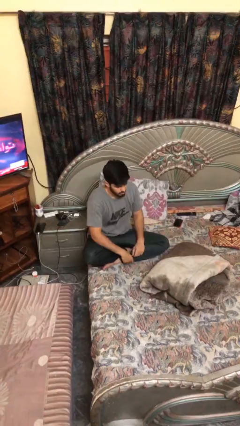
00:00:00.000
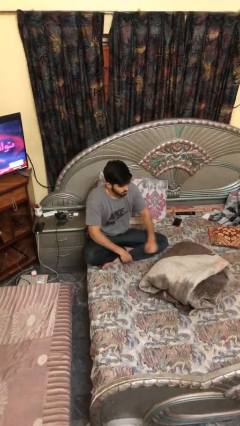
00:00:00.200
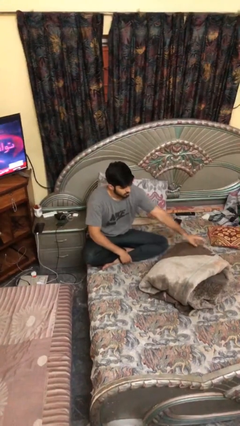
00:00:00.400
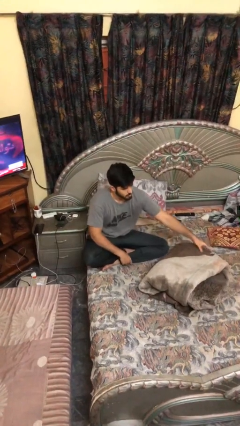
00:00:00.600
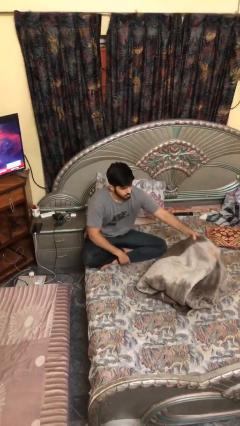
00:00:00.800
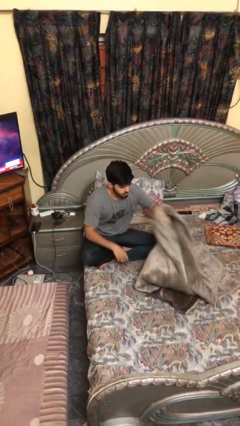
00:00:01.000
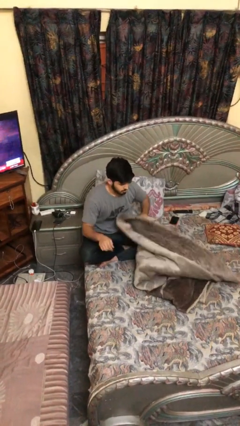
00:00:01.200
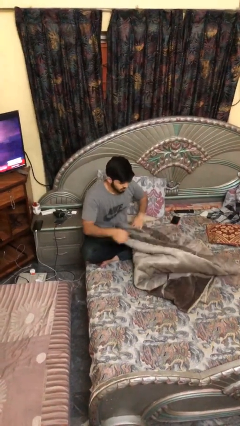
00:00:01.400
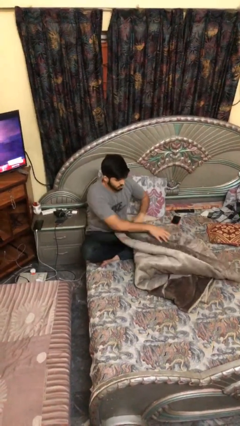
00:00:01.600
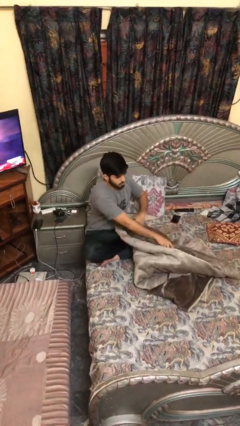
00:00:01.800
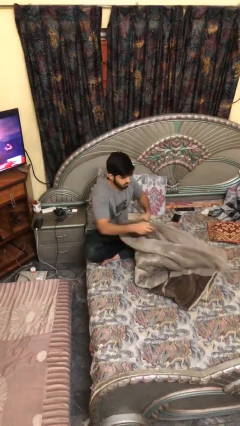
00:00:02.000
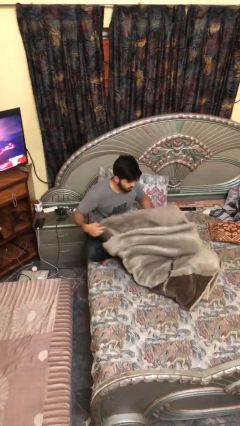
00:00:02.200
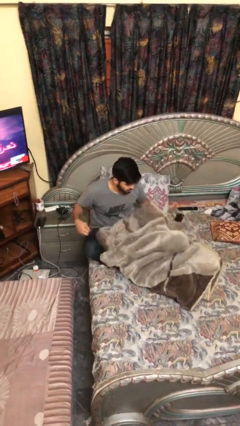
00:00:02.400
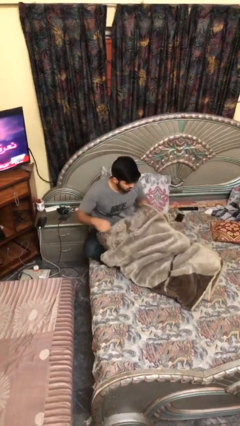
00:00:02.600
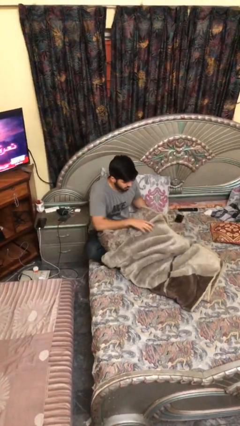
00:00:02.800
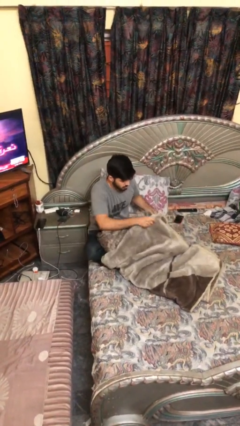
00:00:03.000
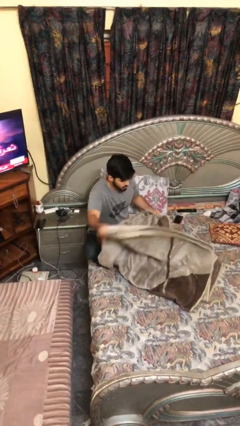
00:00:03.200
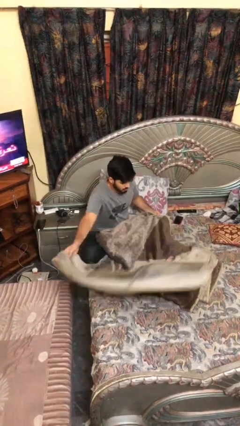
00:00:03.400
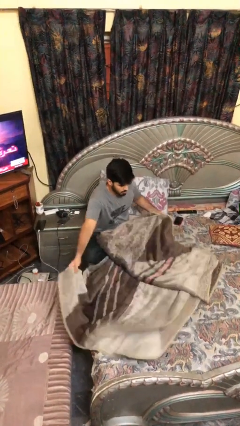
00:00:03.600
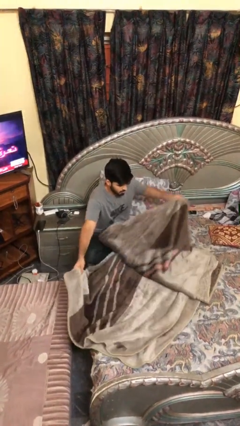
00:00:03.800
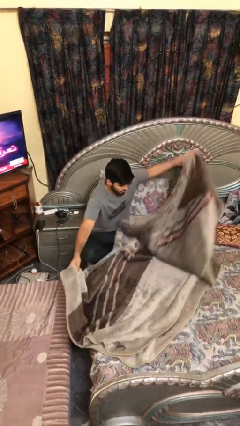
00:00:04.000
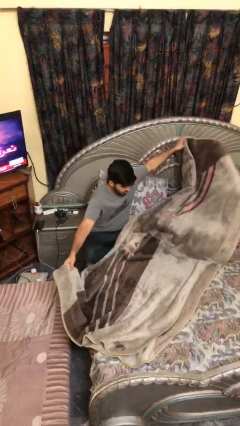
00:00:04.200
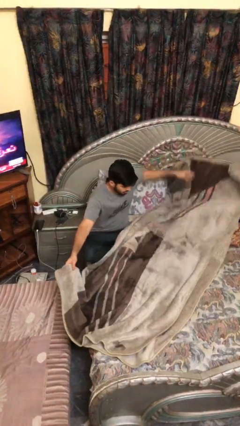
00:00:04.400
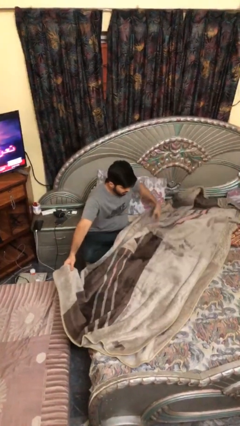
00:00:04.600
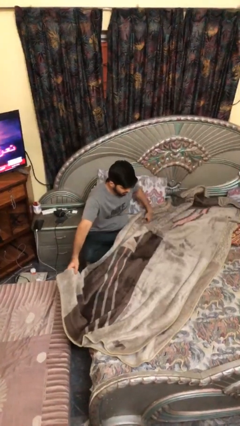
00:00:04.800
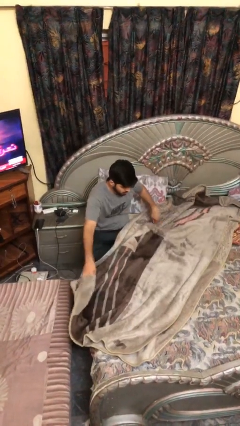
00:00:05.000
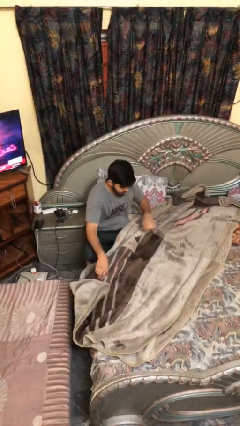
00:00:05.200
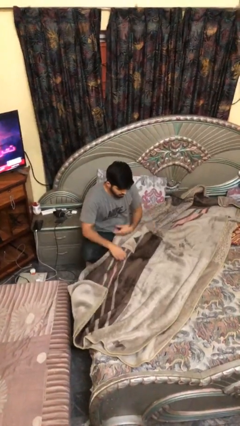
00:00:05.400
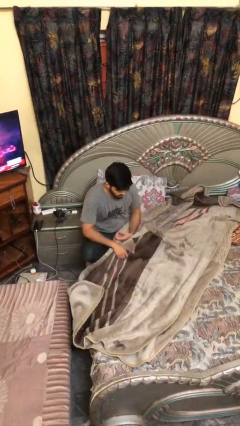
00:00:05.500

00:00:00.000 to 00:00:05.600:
person unfolds blanket

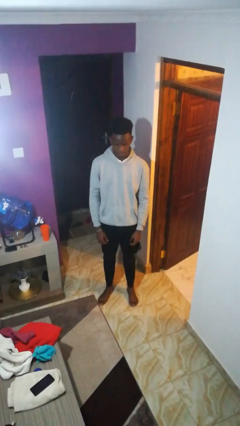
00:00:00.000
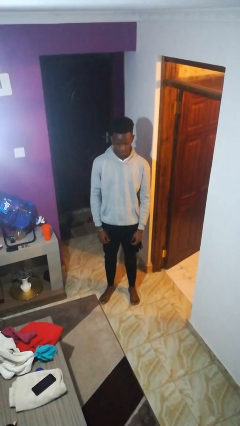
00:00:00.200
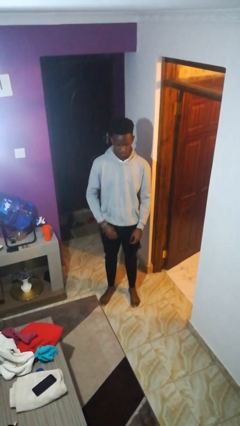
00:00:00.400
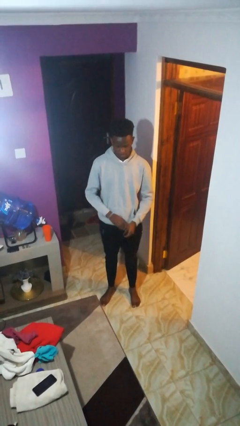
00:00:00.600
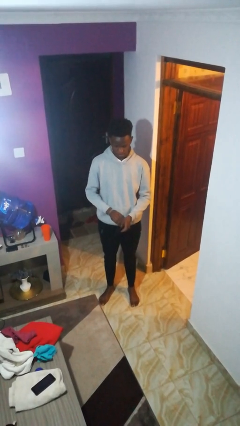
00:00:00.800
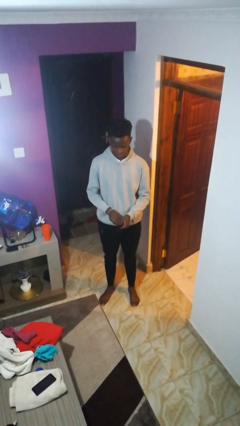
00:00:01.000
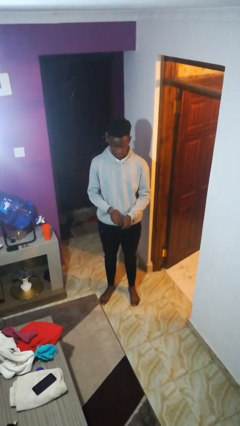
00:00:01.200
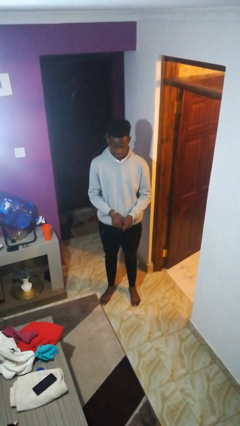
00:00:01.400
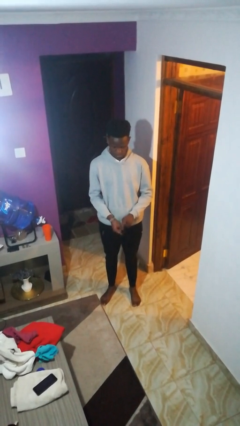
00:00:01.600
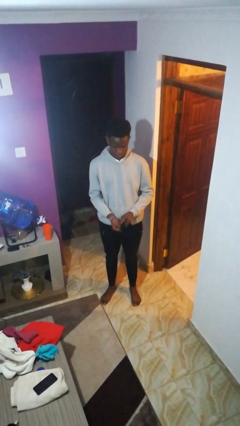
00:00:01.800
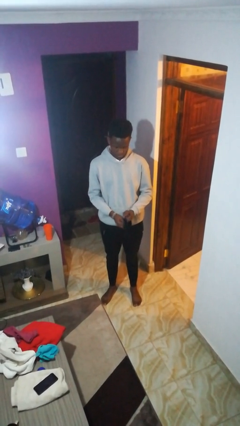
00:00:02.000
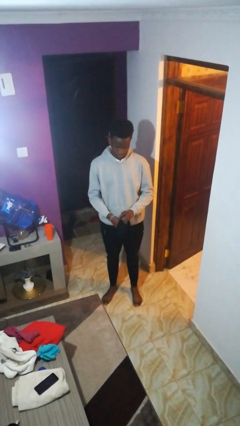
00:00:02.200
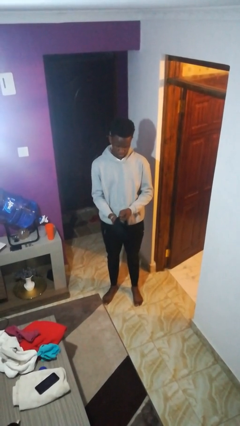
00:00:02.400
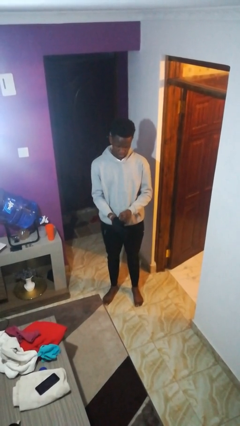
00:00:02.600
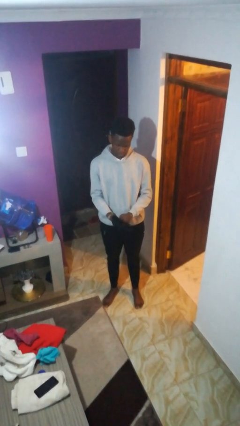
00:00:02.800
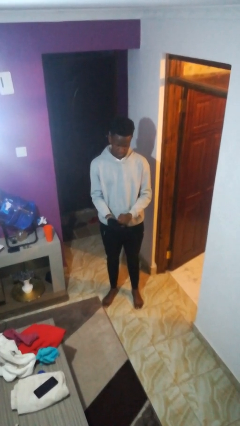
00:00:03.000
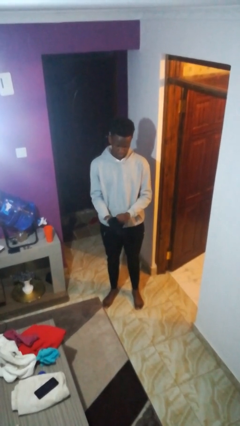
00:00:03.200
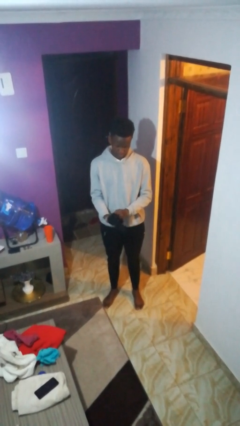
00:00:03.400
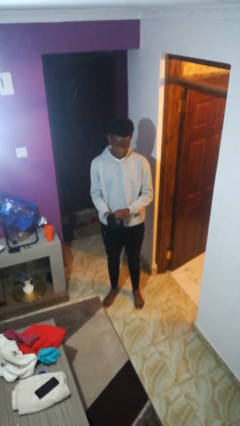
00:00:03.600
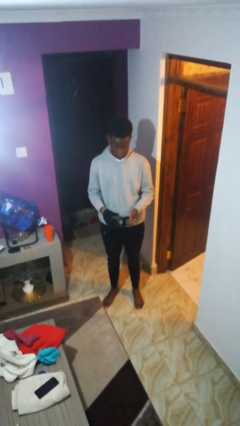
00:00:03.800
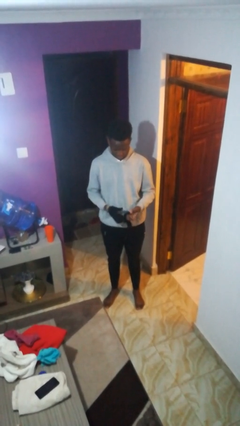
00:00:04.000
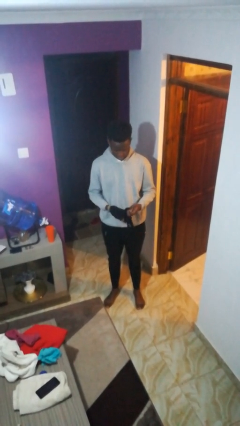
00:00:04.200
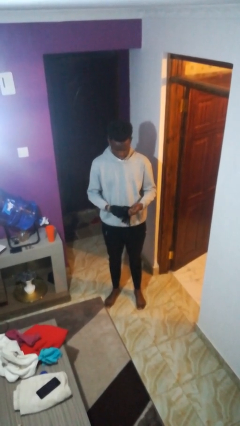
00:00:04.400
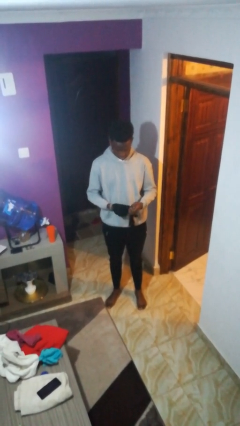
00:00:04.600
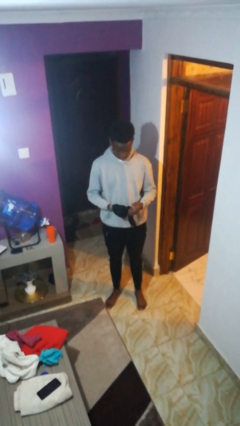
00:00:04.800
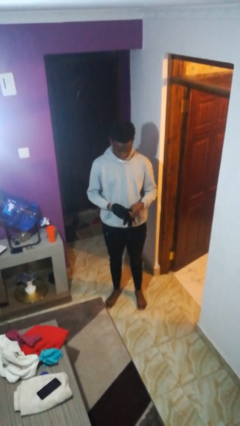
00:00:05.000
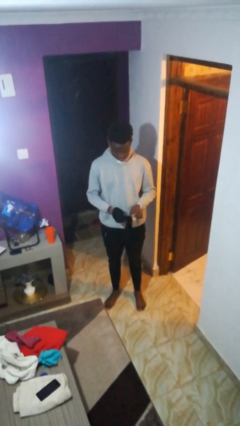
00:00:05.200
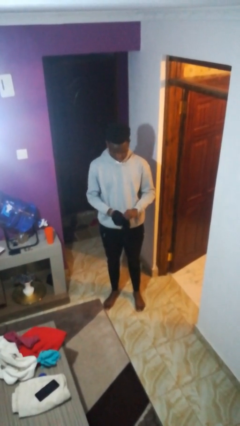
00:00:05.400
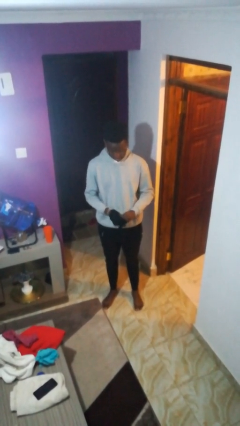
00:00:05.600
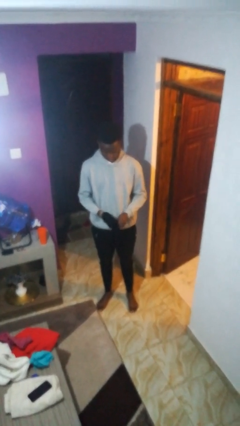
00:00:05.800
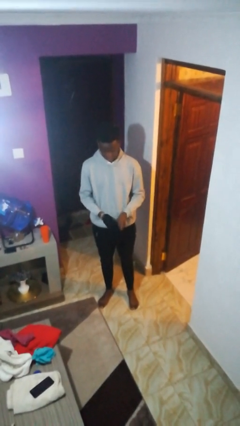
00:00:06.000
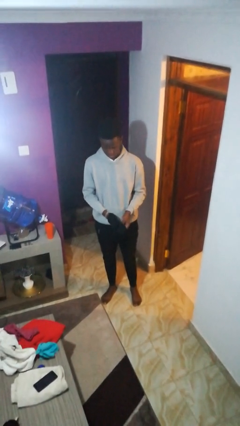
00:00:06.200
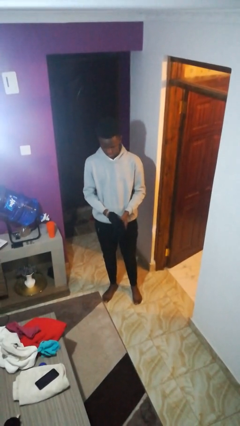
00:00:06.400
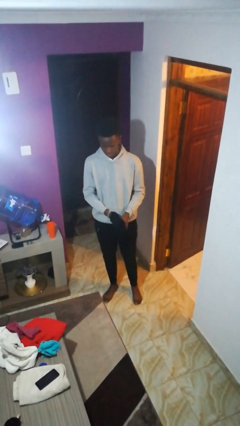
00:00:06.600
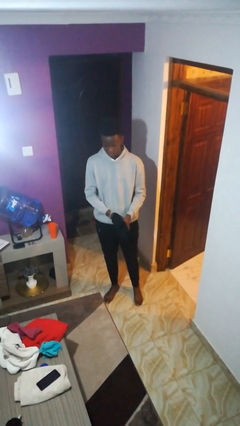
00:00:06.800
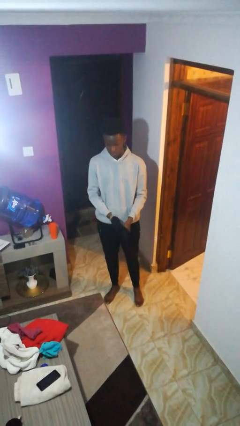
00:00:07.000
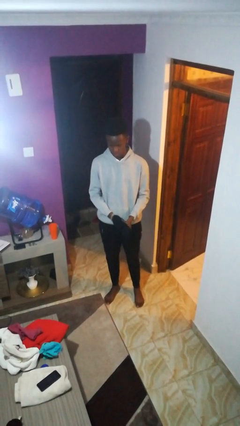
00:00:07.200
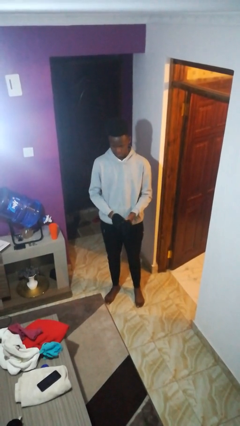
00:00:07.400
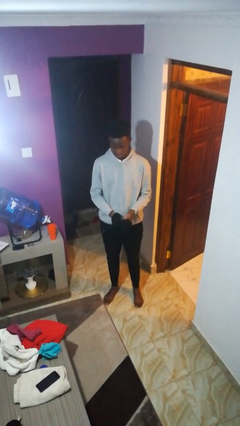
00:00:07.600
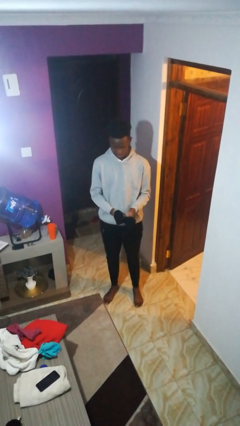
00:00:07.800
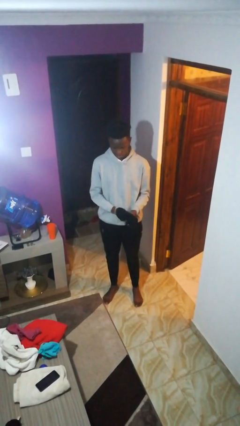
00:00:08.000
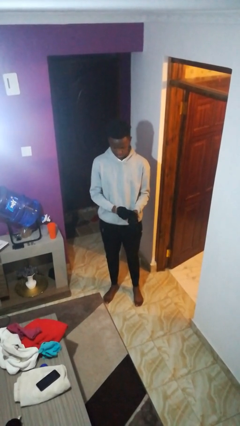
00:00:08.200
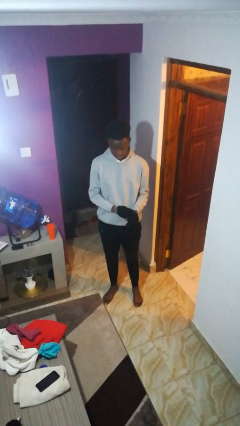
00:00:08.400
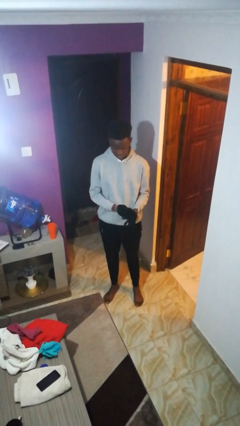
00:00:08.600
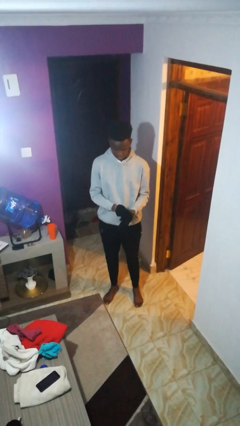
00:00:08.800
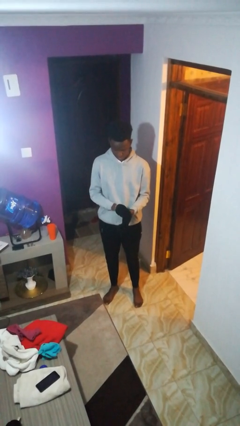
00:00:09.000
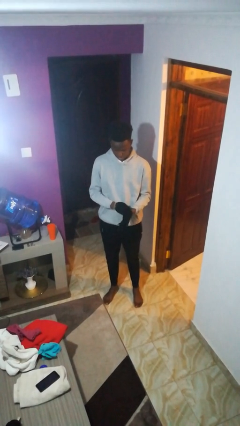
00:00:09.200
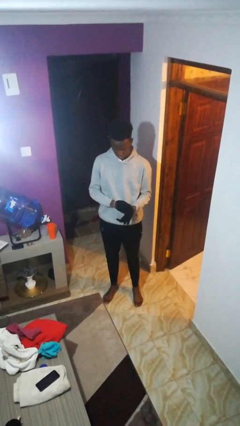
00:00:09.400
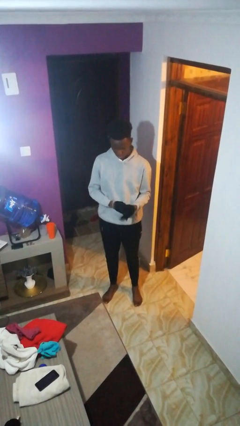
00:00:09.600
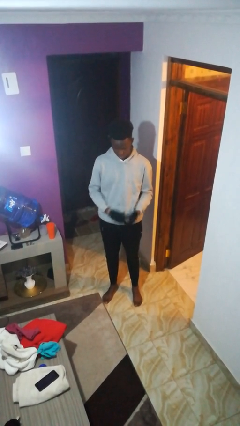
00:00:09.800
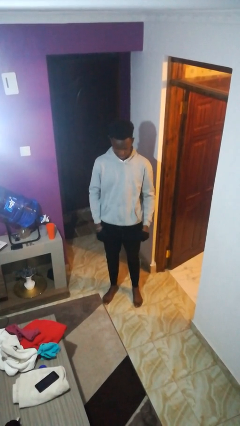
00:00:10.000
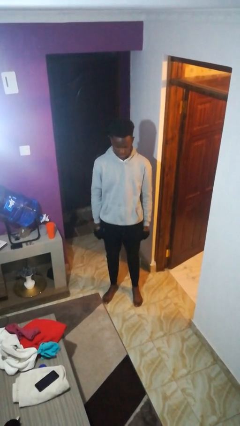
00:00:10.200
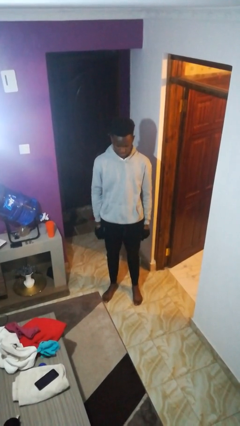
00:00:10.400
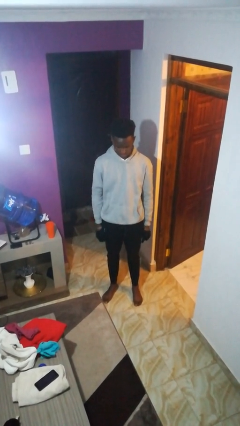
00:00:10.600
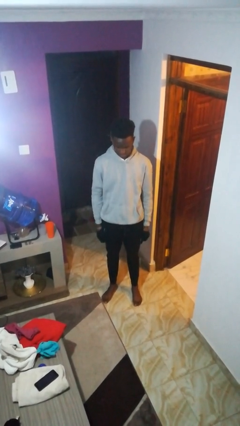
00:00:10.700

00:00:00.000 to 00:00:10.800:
person puts on gloves

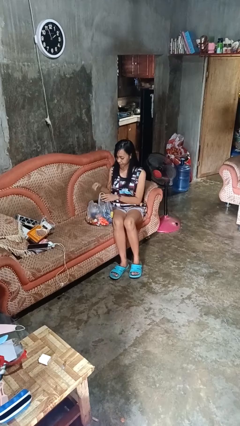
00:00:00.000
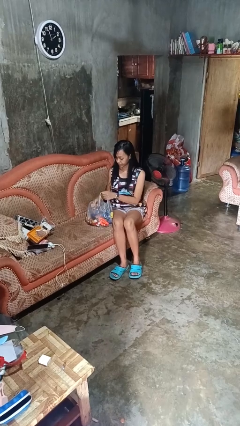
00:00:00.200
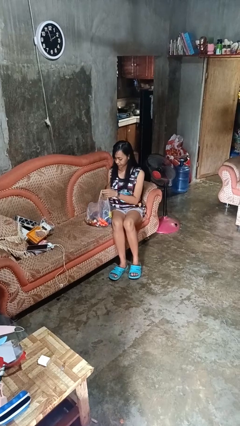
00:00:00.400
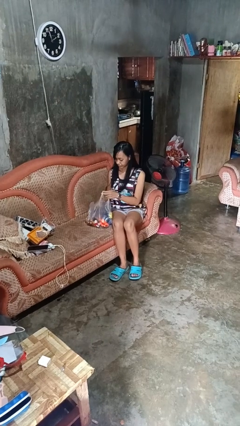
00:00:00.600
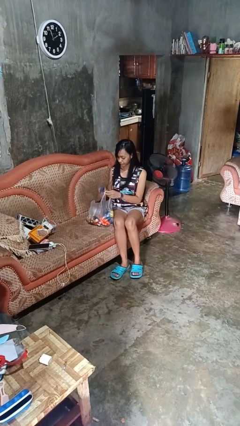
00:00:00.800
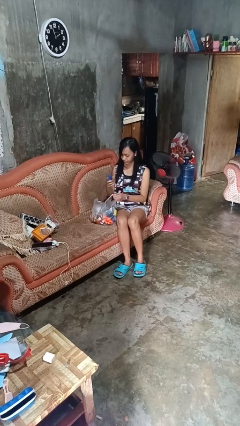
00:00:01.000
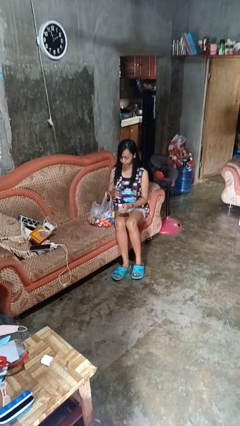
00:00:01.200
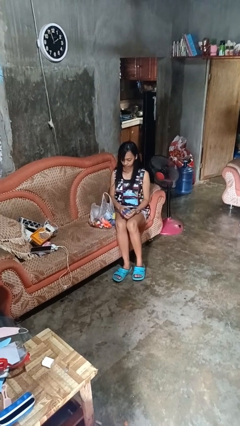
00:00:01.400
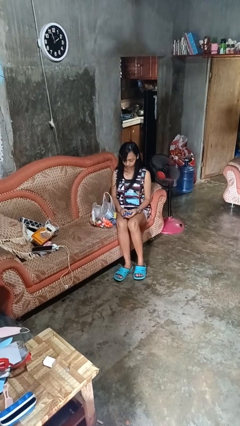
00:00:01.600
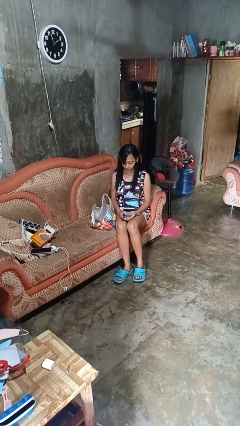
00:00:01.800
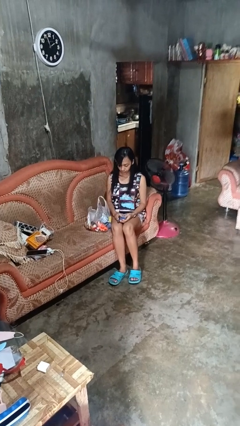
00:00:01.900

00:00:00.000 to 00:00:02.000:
person takes object from bag
